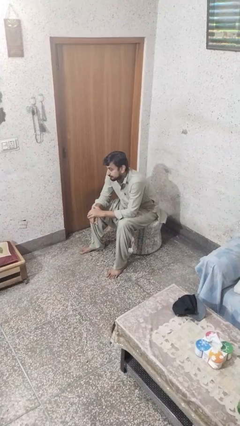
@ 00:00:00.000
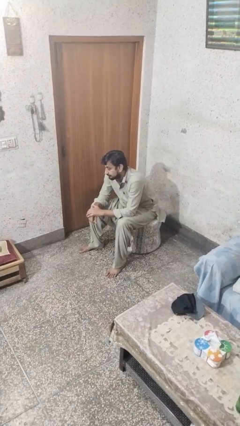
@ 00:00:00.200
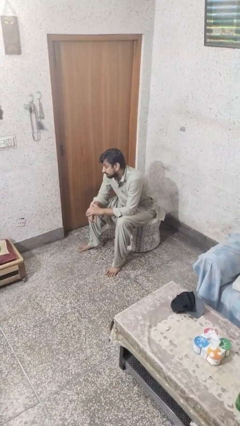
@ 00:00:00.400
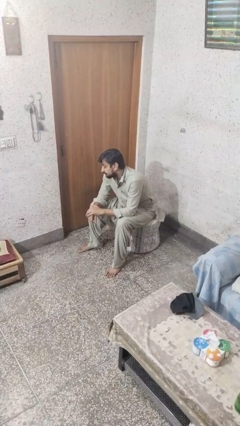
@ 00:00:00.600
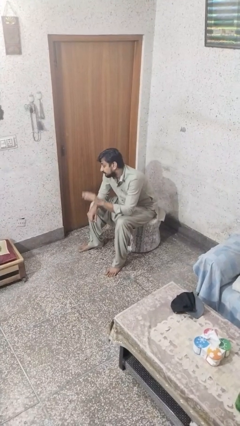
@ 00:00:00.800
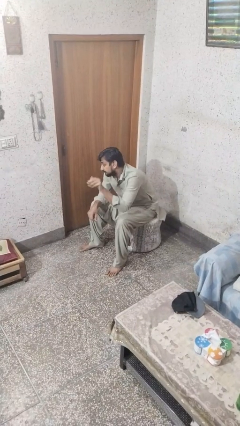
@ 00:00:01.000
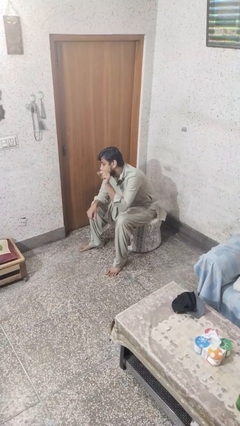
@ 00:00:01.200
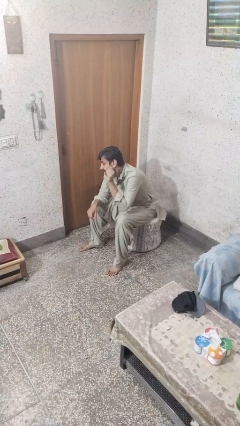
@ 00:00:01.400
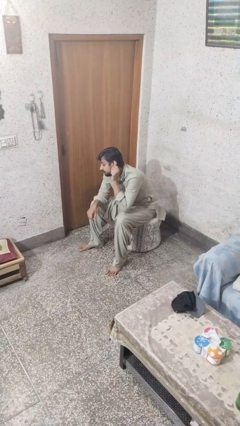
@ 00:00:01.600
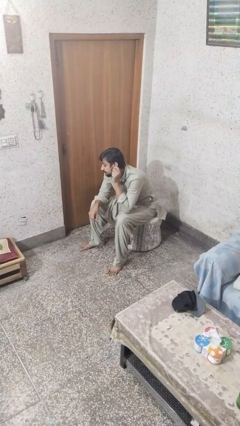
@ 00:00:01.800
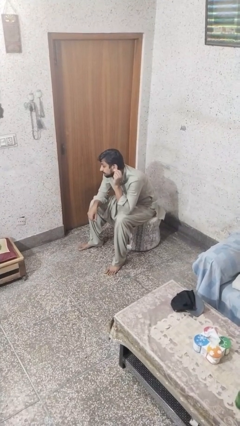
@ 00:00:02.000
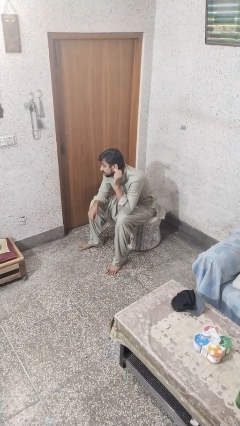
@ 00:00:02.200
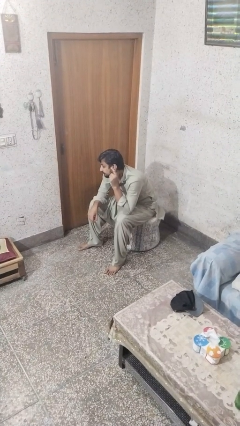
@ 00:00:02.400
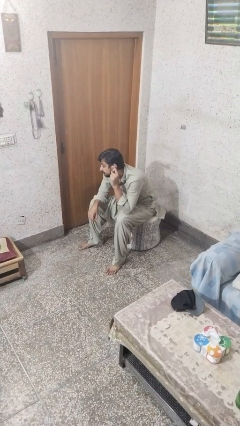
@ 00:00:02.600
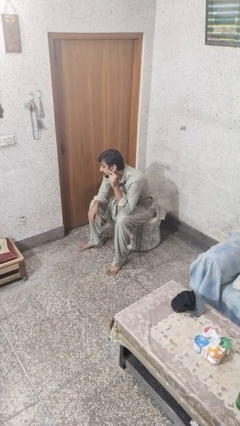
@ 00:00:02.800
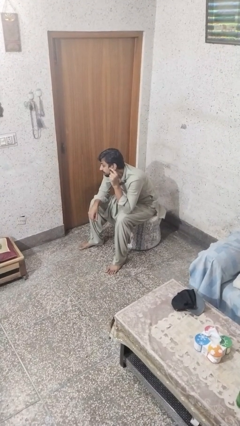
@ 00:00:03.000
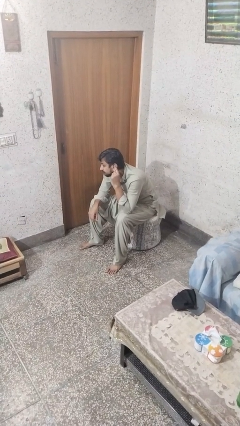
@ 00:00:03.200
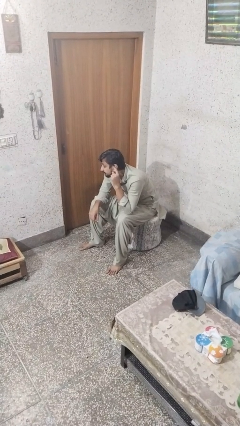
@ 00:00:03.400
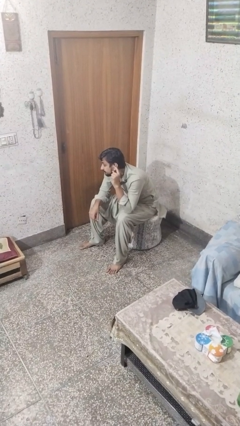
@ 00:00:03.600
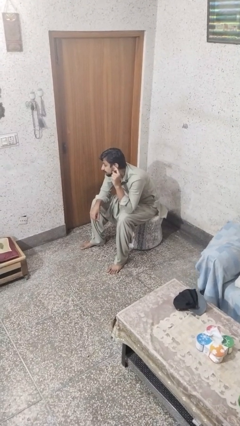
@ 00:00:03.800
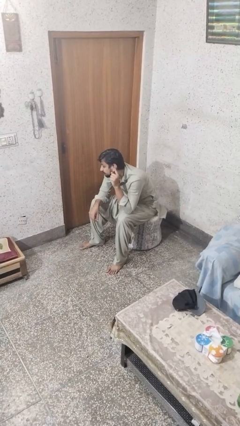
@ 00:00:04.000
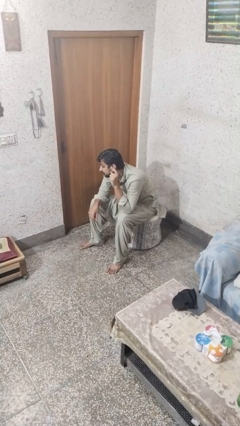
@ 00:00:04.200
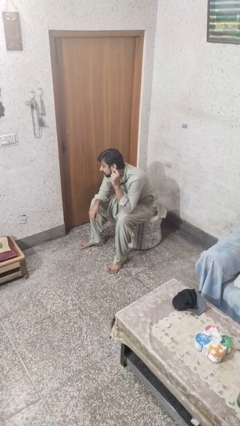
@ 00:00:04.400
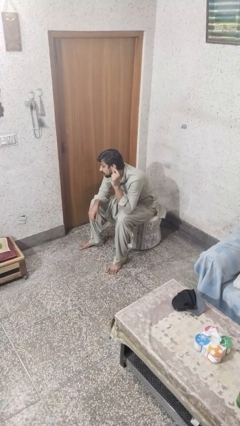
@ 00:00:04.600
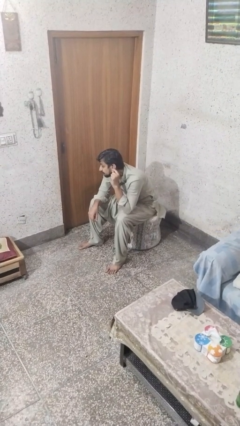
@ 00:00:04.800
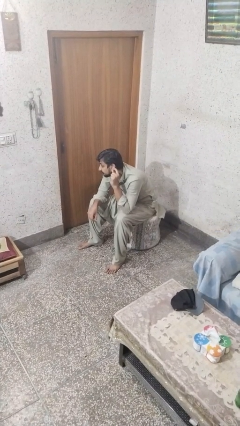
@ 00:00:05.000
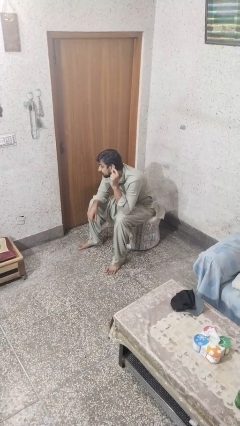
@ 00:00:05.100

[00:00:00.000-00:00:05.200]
person gestures listen closely

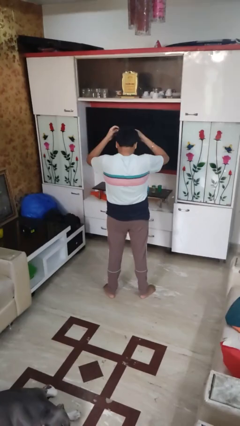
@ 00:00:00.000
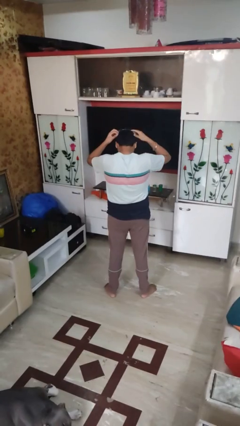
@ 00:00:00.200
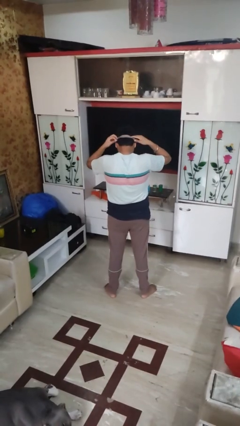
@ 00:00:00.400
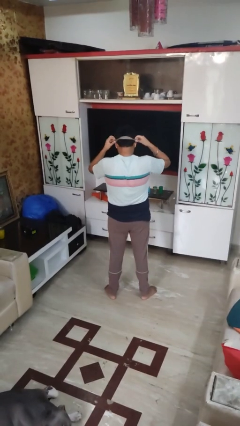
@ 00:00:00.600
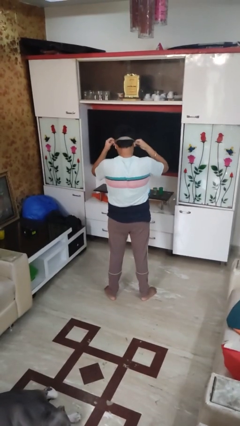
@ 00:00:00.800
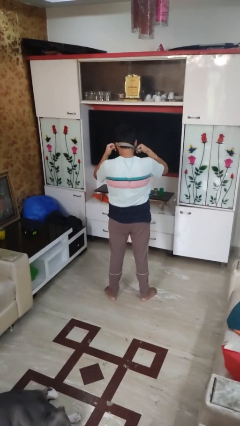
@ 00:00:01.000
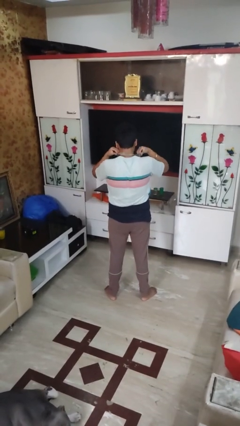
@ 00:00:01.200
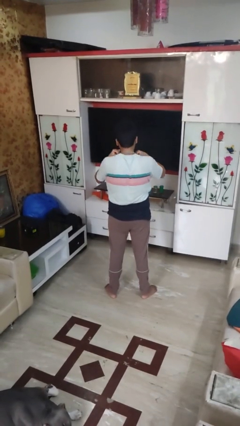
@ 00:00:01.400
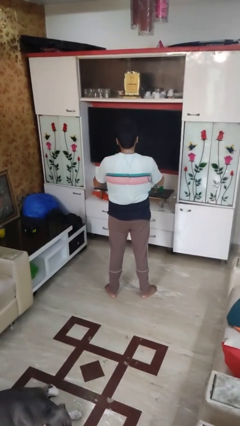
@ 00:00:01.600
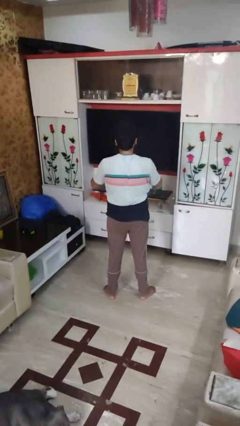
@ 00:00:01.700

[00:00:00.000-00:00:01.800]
person puts on necktie

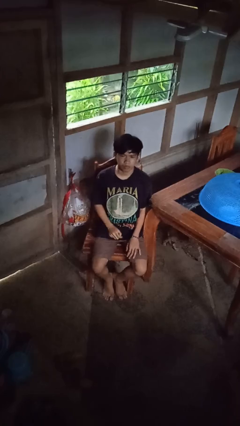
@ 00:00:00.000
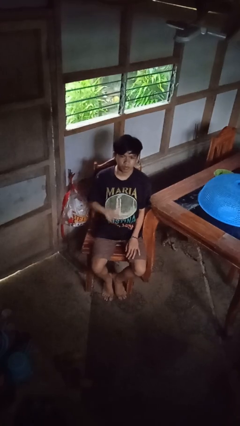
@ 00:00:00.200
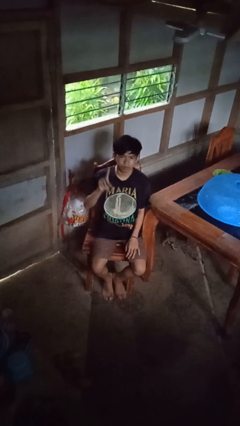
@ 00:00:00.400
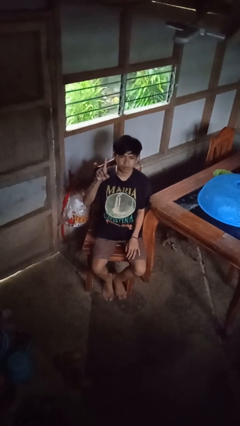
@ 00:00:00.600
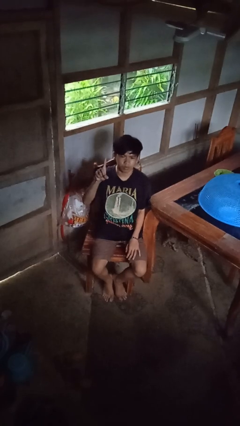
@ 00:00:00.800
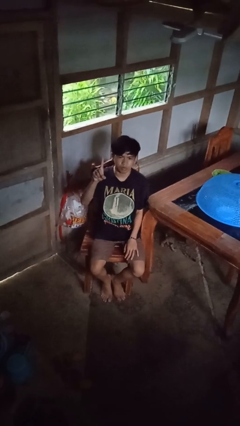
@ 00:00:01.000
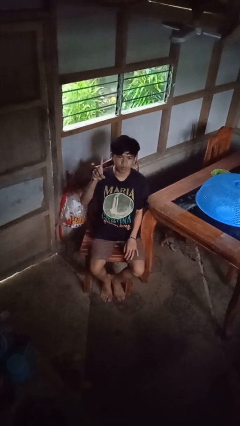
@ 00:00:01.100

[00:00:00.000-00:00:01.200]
person gestures number one

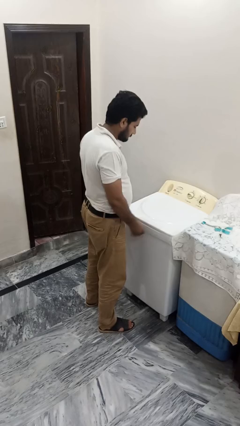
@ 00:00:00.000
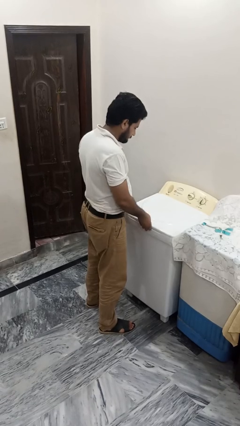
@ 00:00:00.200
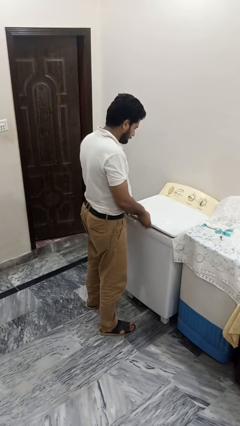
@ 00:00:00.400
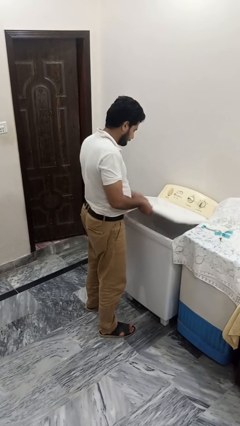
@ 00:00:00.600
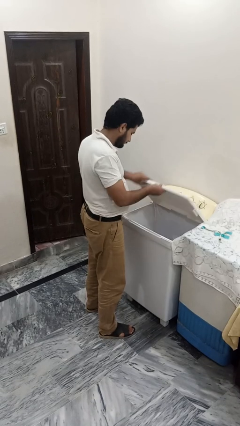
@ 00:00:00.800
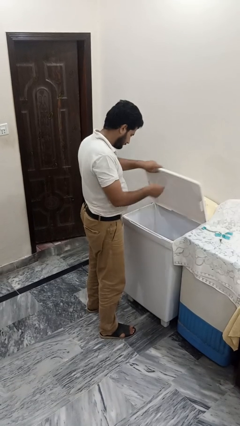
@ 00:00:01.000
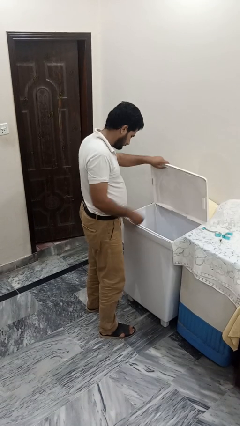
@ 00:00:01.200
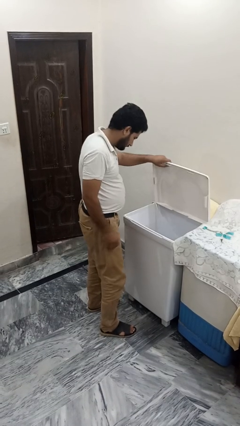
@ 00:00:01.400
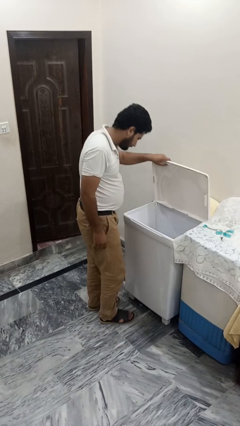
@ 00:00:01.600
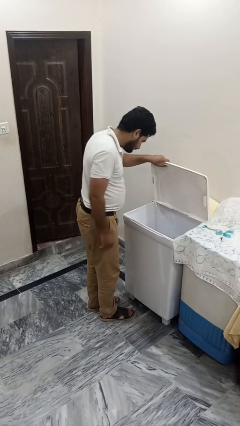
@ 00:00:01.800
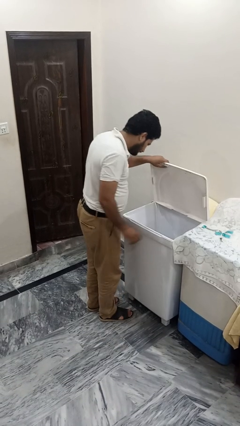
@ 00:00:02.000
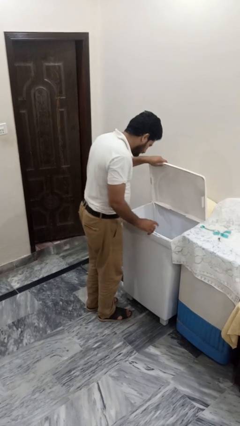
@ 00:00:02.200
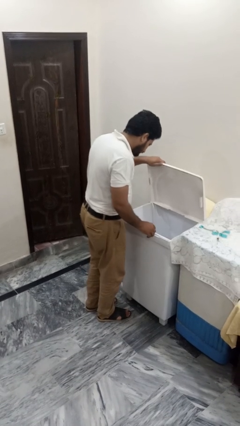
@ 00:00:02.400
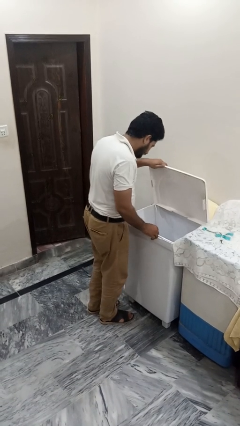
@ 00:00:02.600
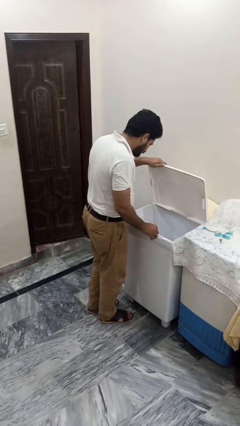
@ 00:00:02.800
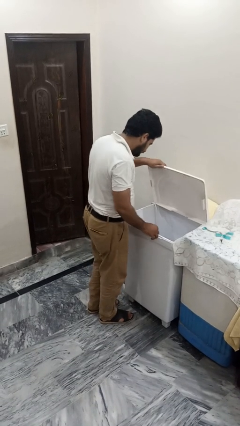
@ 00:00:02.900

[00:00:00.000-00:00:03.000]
person opens clothes washer

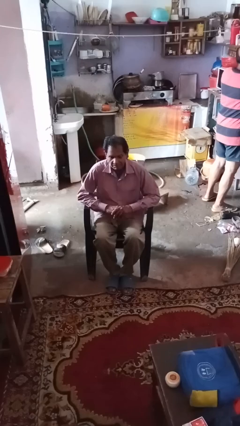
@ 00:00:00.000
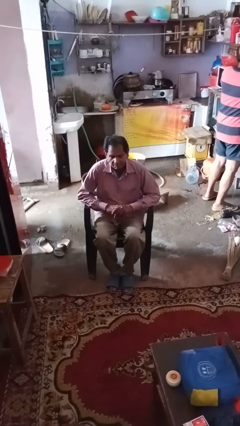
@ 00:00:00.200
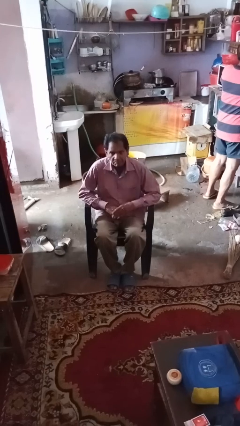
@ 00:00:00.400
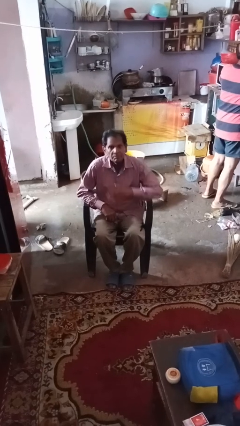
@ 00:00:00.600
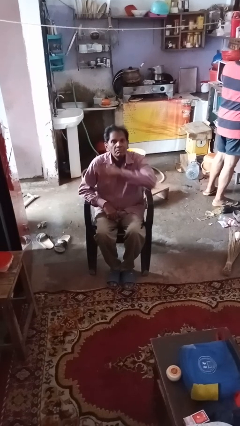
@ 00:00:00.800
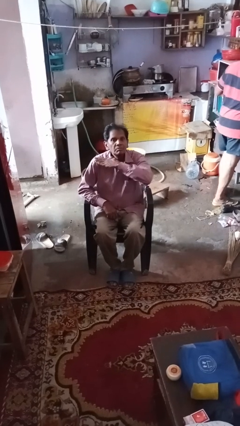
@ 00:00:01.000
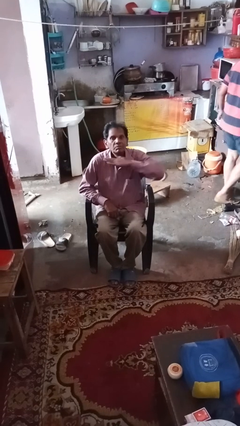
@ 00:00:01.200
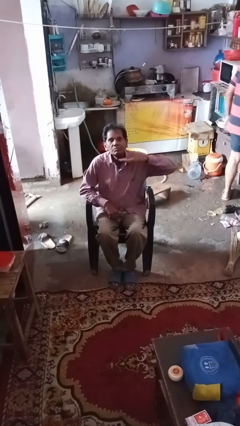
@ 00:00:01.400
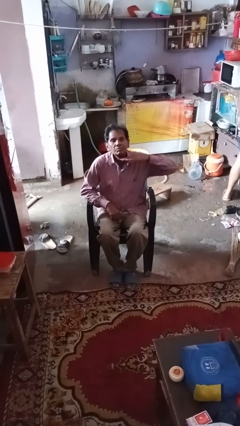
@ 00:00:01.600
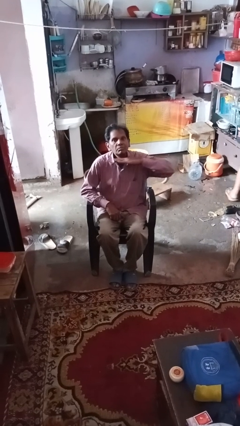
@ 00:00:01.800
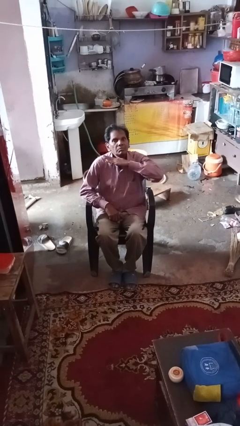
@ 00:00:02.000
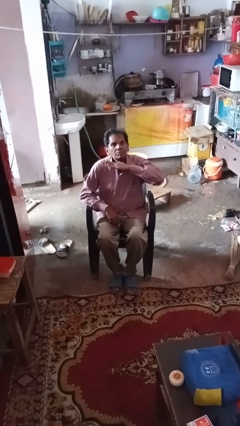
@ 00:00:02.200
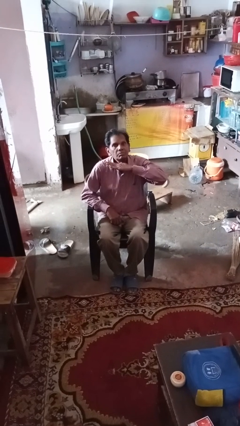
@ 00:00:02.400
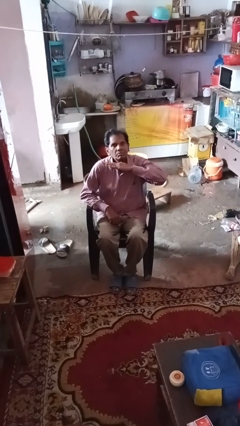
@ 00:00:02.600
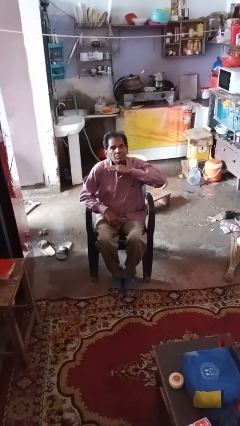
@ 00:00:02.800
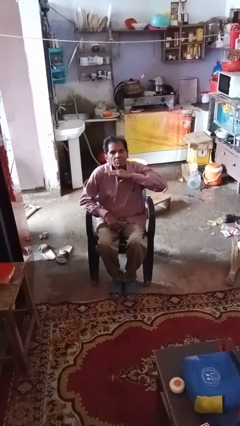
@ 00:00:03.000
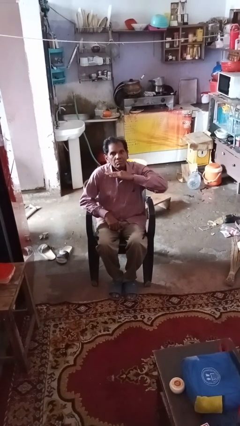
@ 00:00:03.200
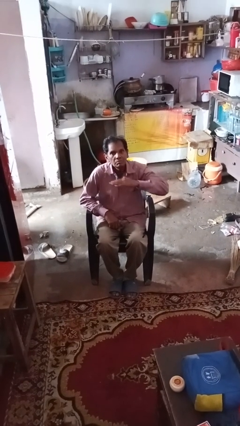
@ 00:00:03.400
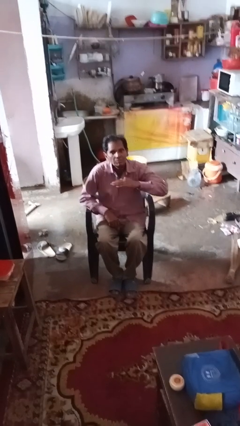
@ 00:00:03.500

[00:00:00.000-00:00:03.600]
person gestures cut

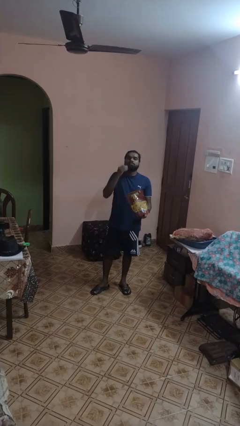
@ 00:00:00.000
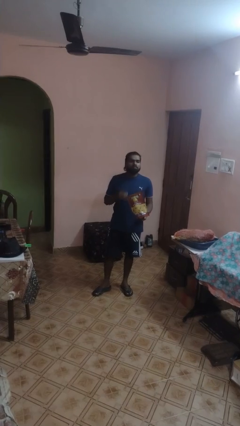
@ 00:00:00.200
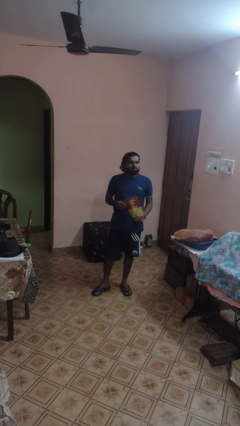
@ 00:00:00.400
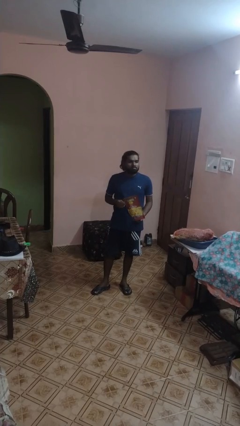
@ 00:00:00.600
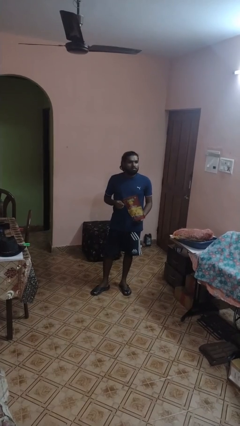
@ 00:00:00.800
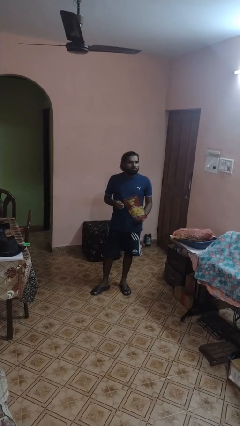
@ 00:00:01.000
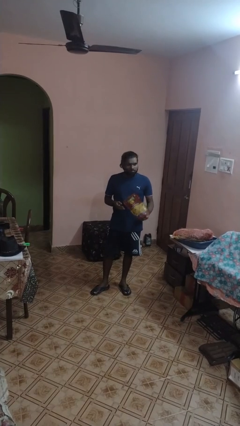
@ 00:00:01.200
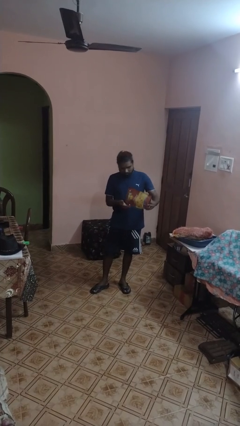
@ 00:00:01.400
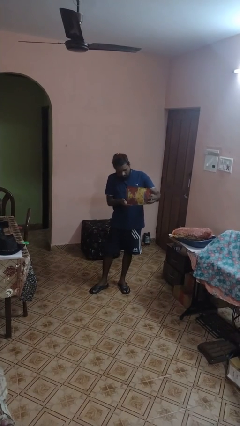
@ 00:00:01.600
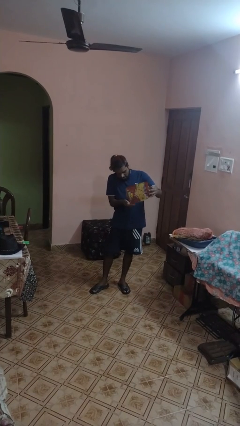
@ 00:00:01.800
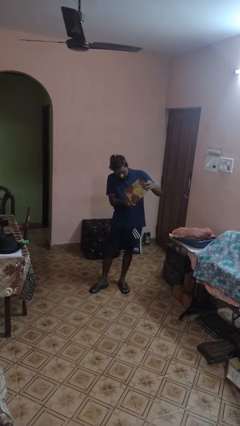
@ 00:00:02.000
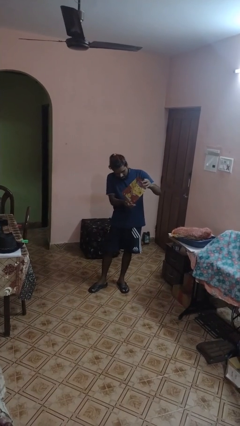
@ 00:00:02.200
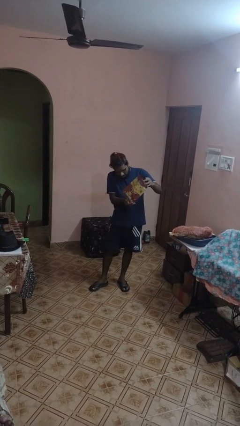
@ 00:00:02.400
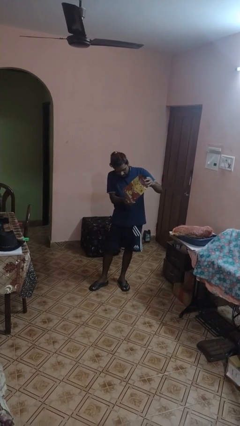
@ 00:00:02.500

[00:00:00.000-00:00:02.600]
person eats snack from bag
